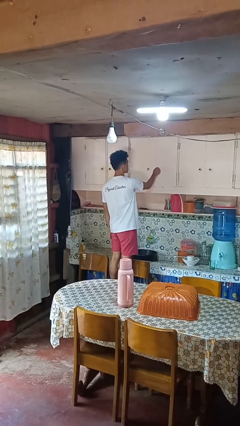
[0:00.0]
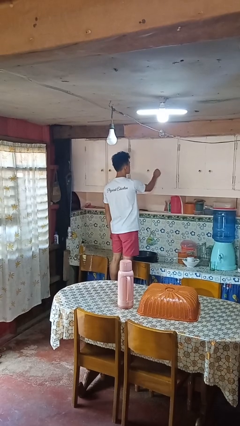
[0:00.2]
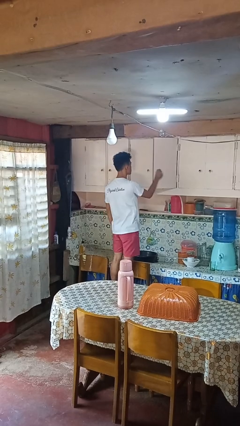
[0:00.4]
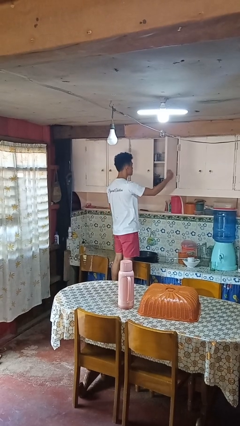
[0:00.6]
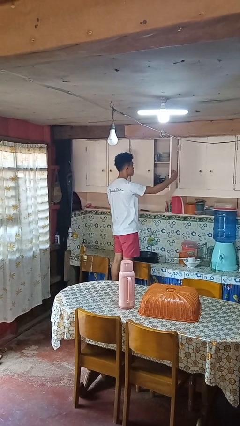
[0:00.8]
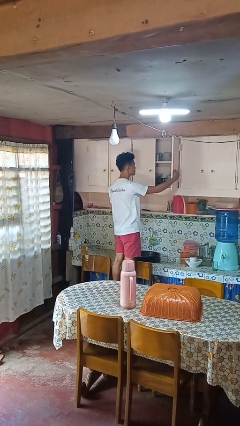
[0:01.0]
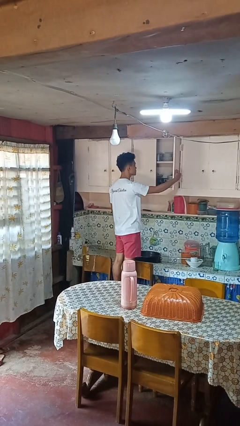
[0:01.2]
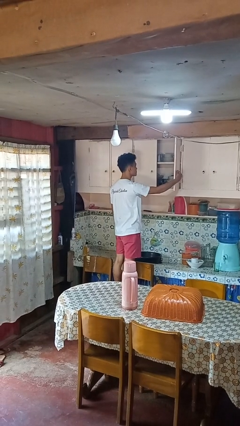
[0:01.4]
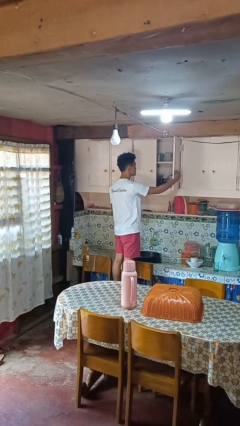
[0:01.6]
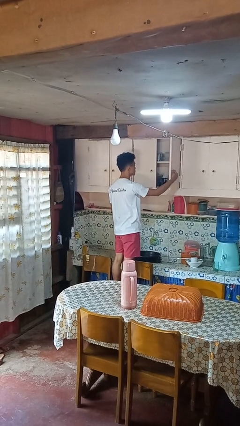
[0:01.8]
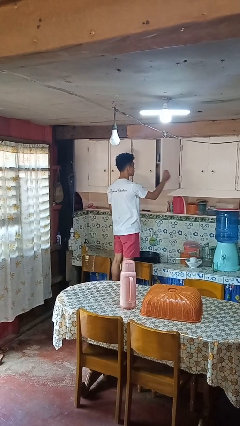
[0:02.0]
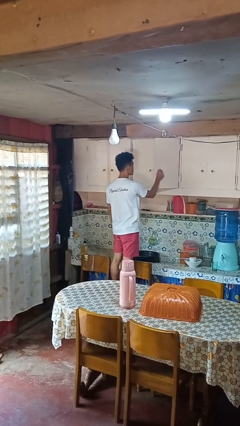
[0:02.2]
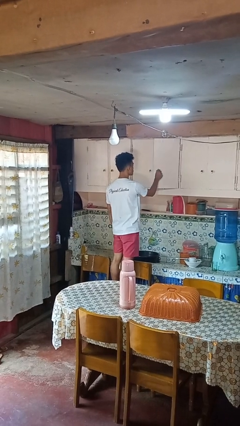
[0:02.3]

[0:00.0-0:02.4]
person opens cabinet

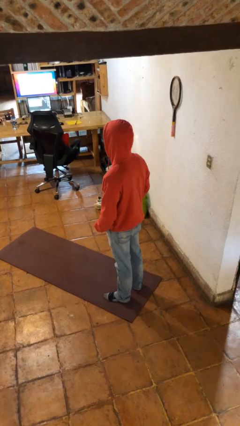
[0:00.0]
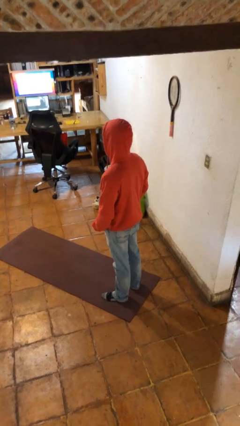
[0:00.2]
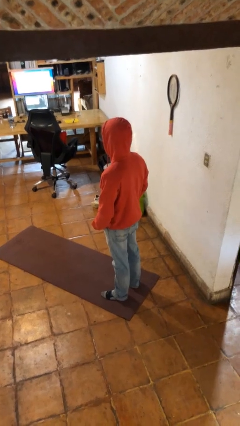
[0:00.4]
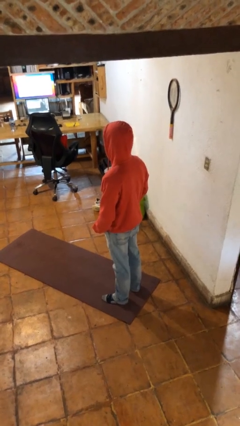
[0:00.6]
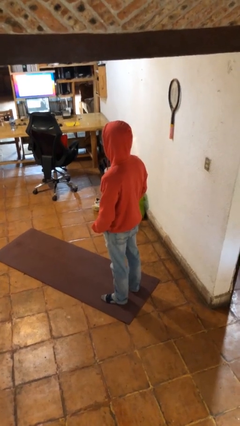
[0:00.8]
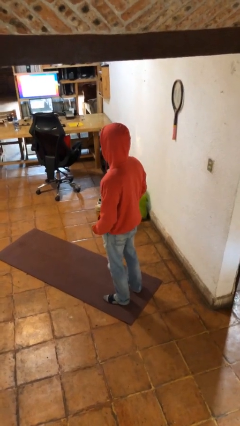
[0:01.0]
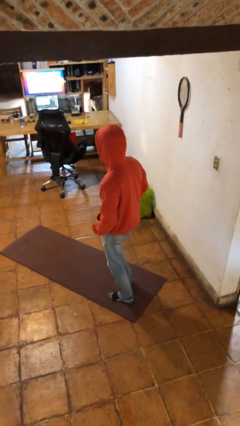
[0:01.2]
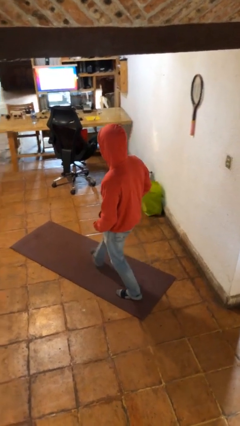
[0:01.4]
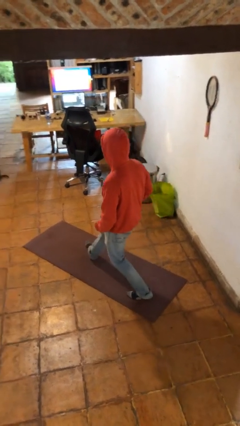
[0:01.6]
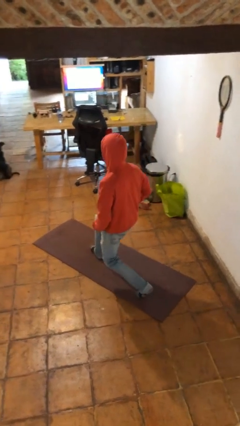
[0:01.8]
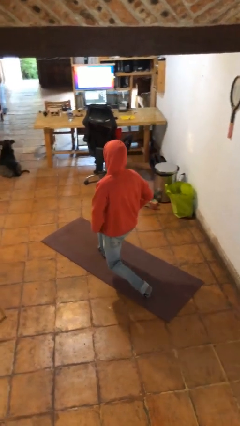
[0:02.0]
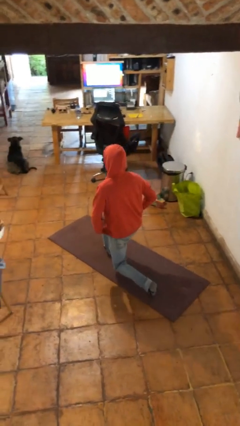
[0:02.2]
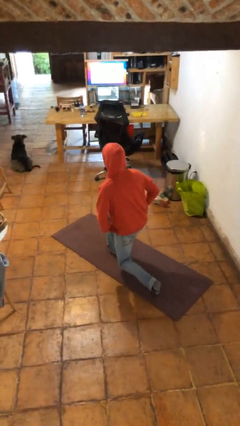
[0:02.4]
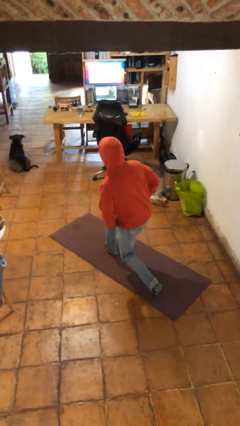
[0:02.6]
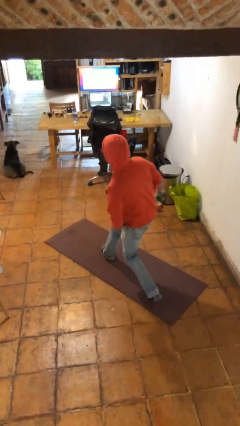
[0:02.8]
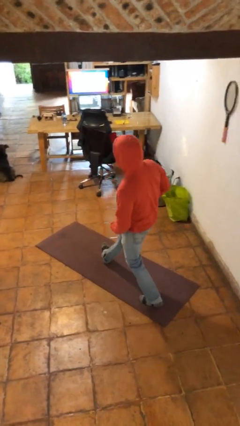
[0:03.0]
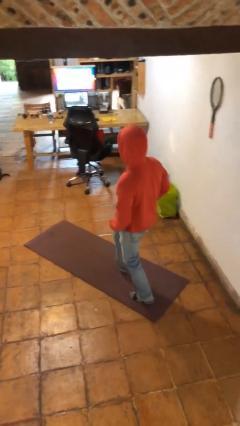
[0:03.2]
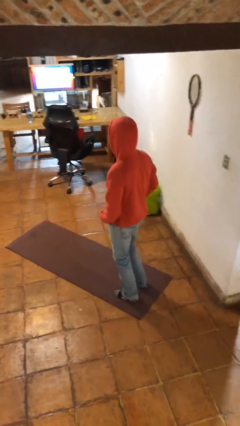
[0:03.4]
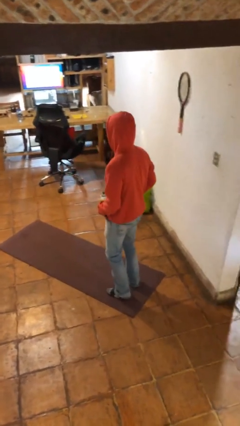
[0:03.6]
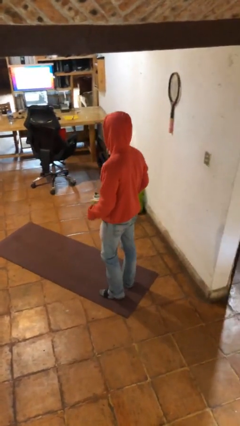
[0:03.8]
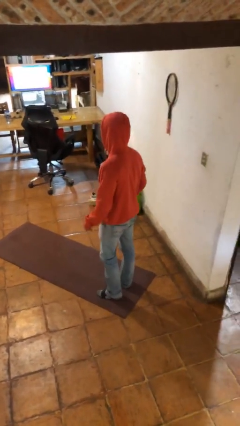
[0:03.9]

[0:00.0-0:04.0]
person exercises with lunges

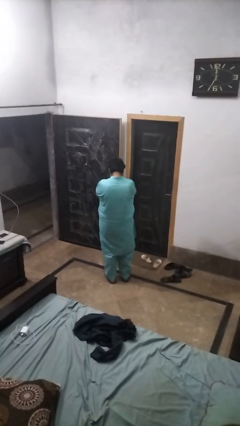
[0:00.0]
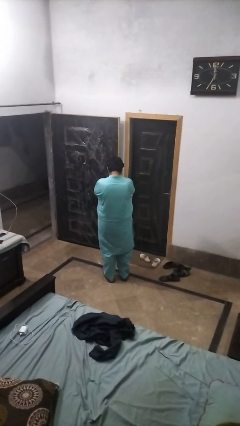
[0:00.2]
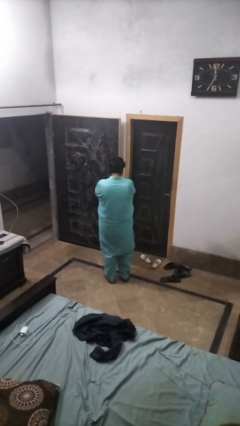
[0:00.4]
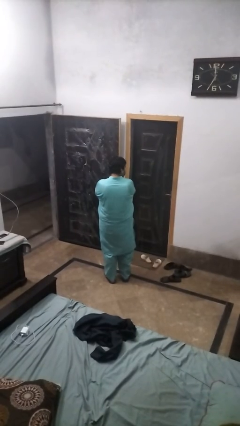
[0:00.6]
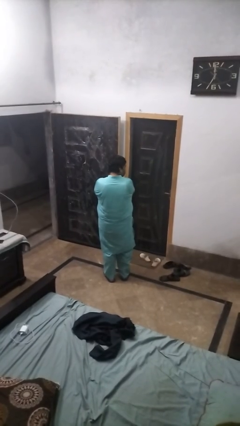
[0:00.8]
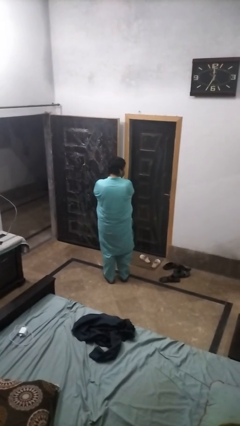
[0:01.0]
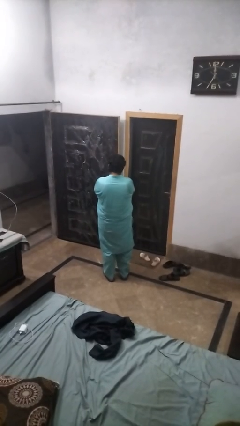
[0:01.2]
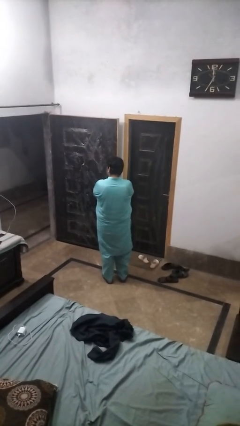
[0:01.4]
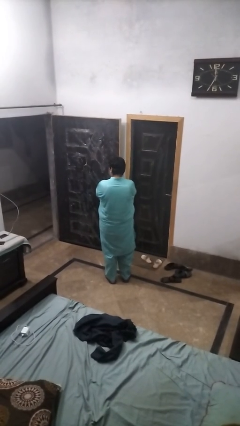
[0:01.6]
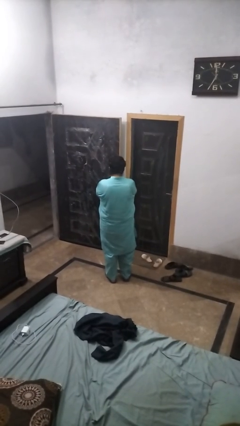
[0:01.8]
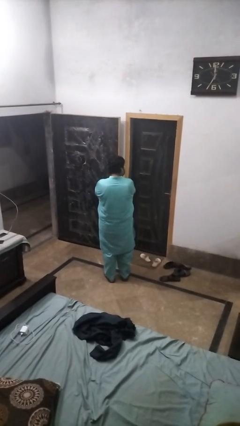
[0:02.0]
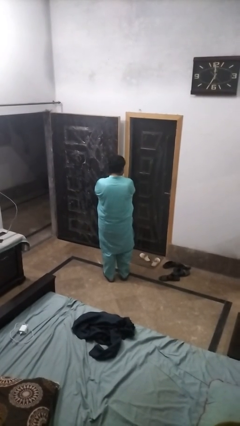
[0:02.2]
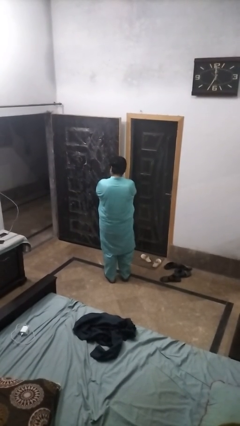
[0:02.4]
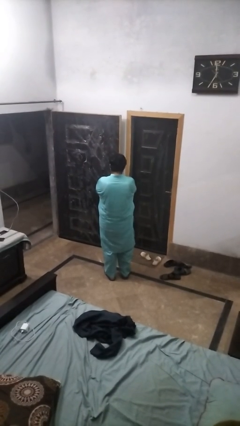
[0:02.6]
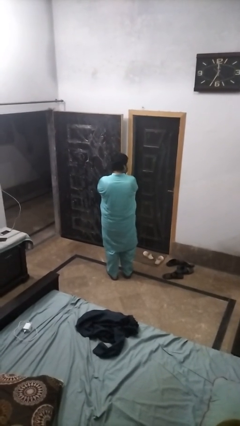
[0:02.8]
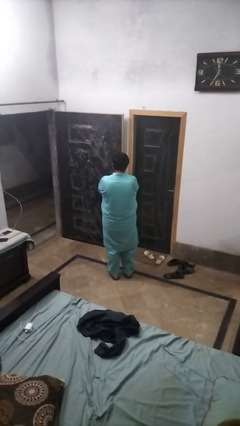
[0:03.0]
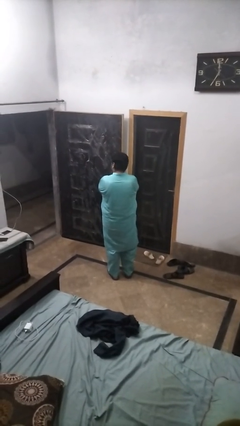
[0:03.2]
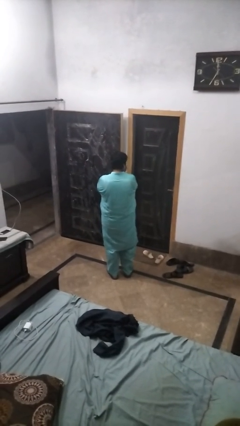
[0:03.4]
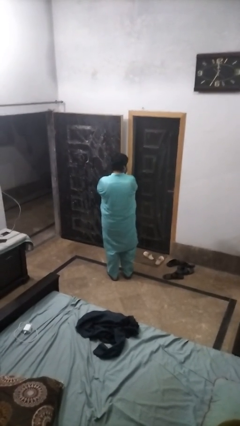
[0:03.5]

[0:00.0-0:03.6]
person shakes head

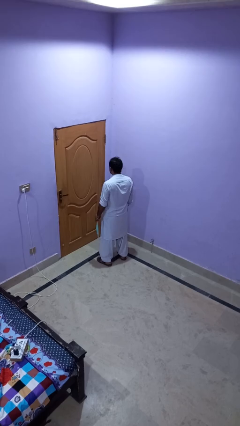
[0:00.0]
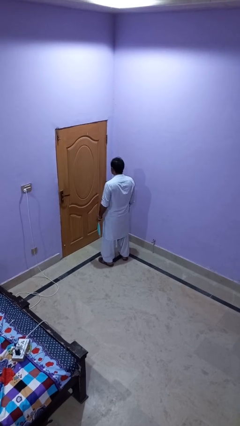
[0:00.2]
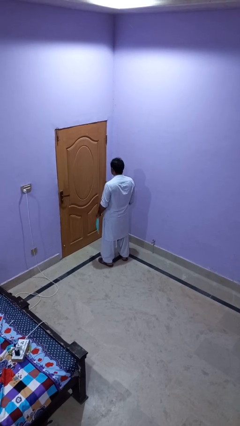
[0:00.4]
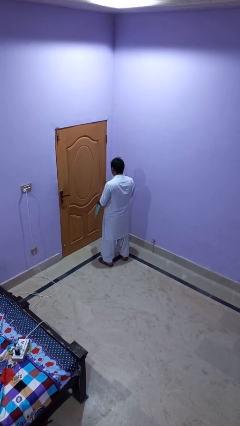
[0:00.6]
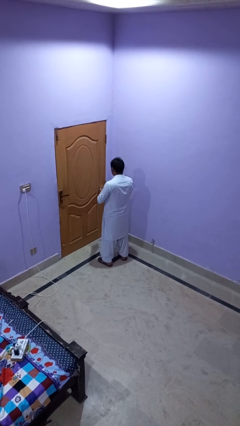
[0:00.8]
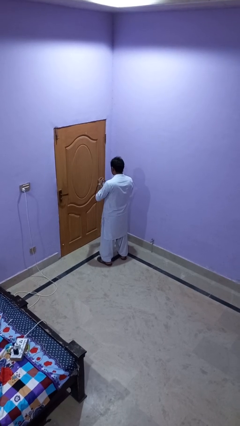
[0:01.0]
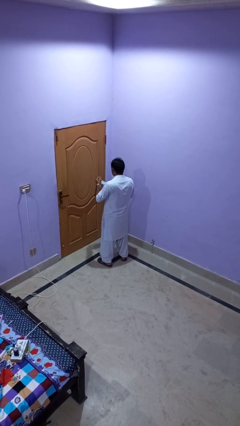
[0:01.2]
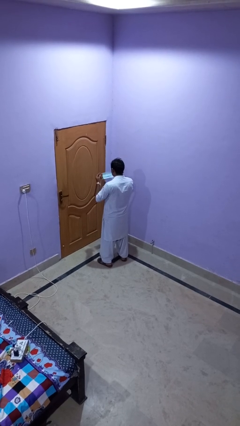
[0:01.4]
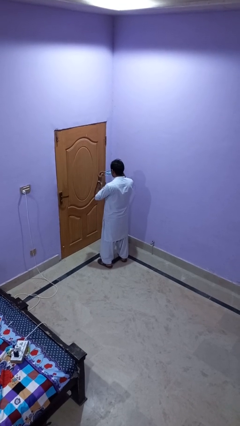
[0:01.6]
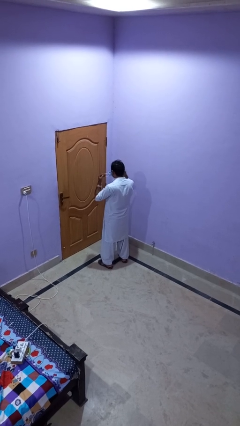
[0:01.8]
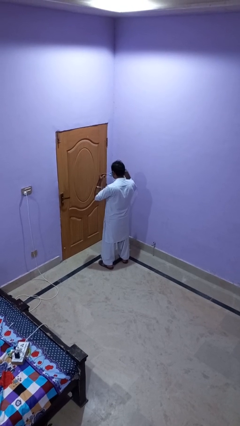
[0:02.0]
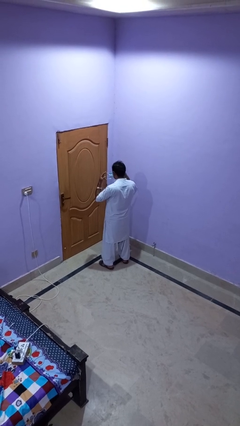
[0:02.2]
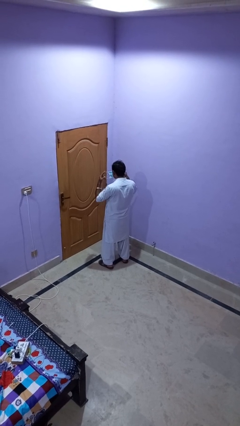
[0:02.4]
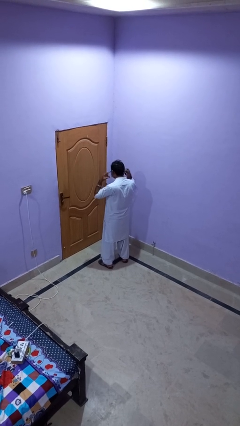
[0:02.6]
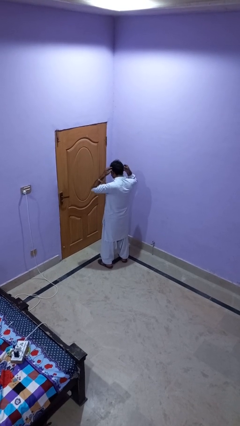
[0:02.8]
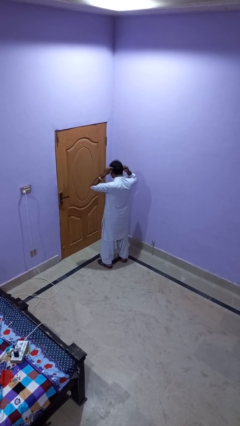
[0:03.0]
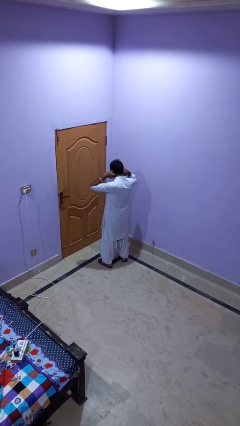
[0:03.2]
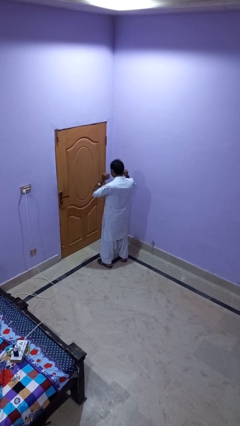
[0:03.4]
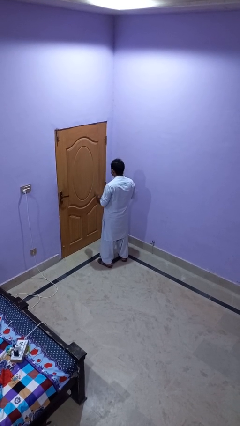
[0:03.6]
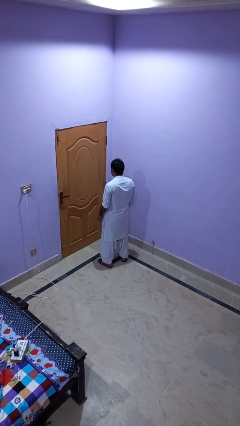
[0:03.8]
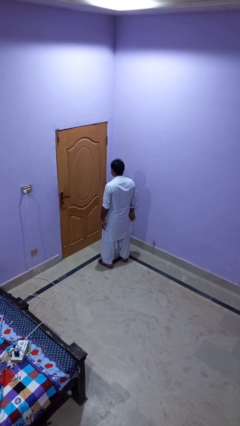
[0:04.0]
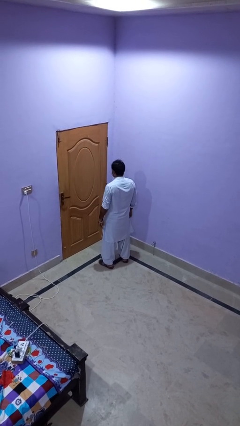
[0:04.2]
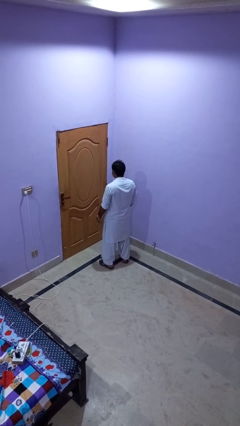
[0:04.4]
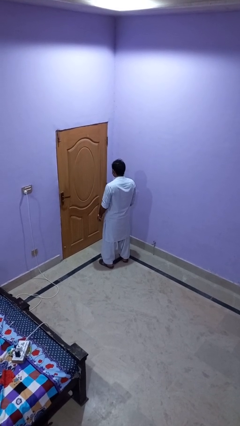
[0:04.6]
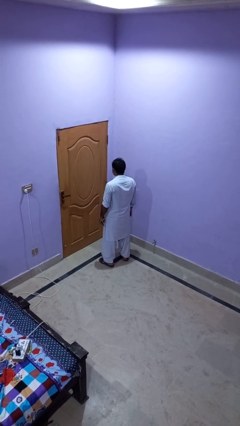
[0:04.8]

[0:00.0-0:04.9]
person puts on facemask

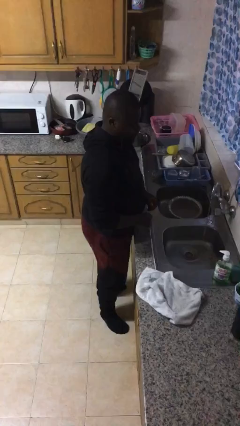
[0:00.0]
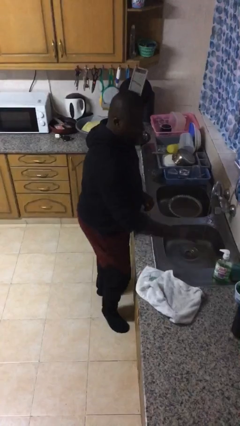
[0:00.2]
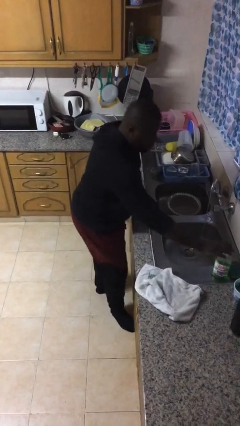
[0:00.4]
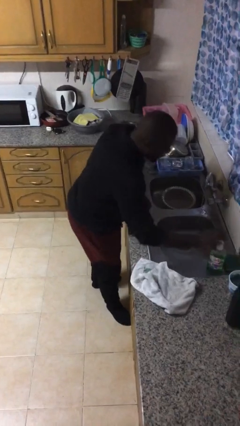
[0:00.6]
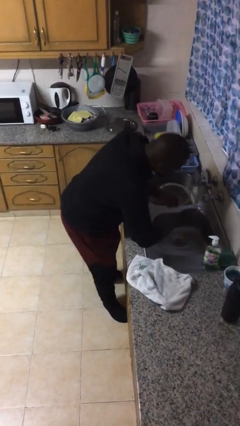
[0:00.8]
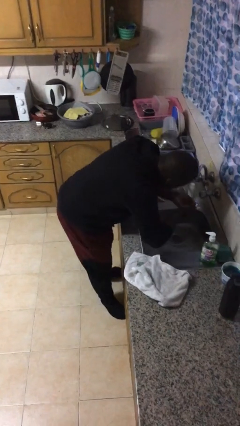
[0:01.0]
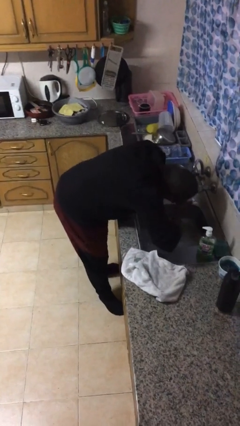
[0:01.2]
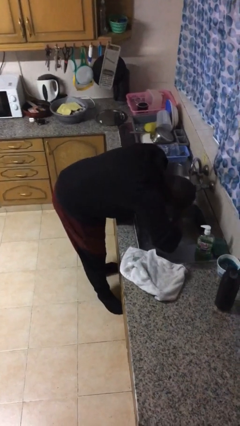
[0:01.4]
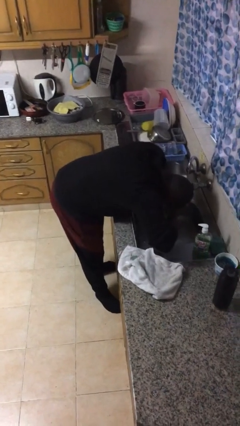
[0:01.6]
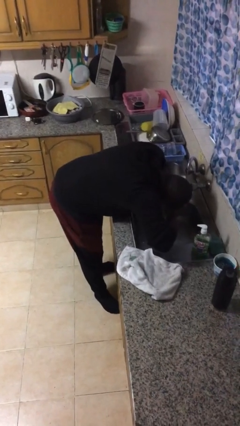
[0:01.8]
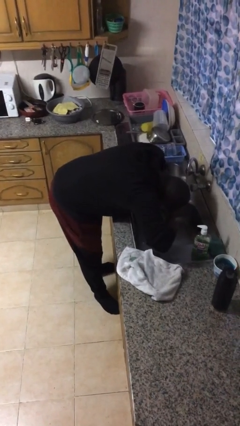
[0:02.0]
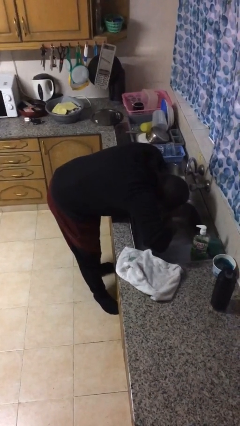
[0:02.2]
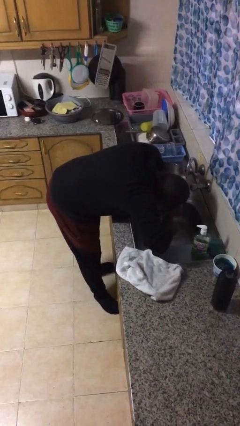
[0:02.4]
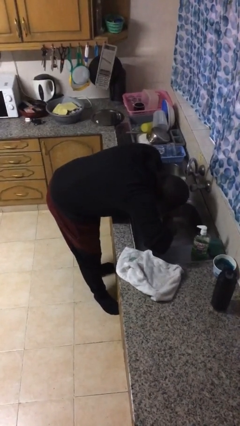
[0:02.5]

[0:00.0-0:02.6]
person washes face

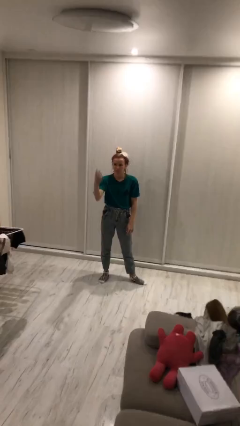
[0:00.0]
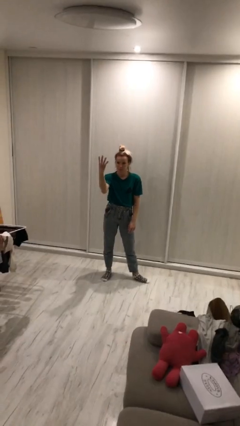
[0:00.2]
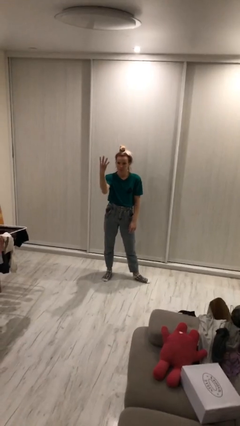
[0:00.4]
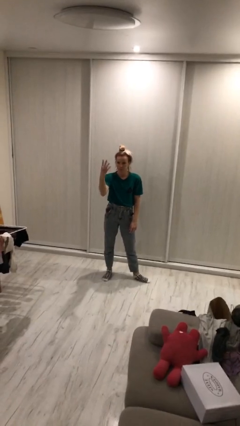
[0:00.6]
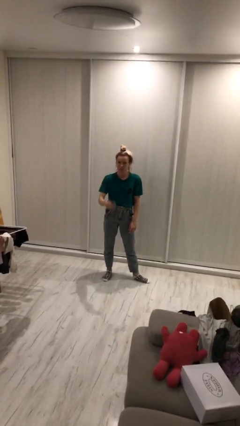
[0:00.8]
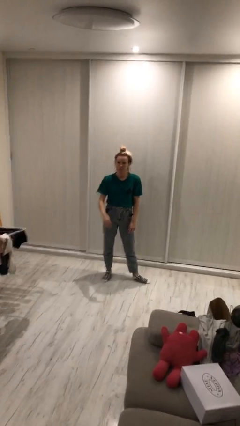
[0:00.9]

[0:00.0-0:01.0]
person gestures number four
